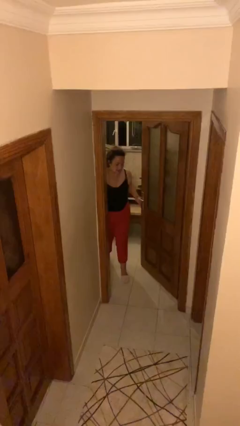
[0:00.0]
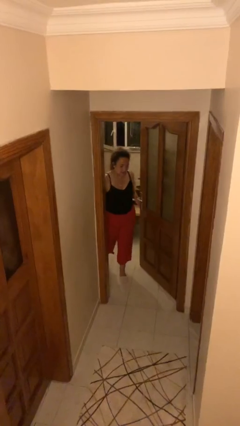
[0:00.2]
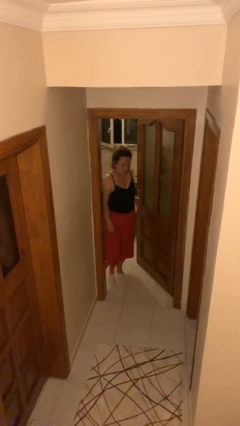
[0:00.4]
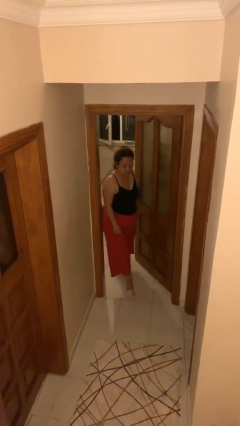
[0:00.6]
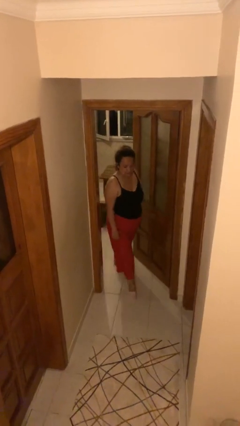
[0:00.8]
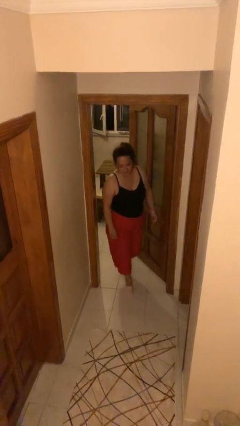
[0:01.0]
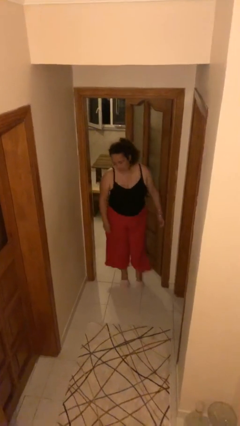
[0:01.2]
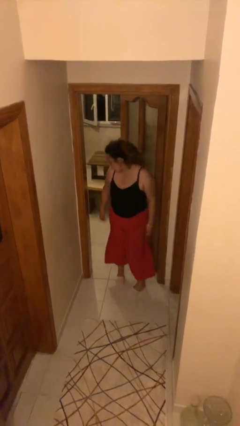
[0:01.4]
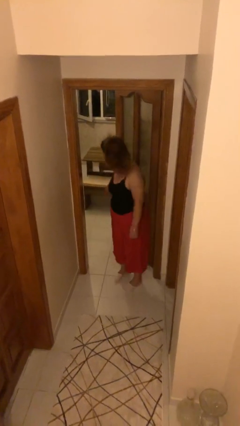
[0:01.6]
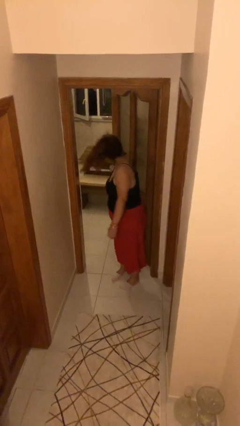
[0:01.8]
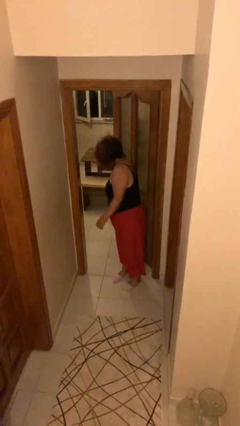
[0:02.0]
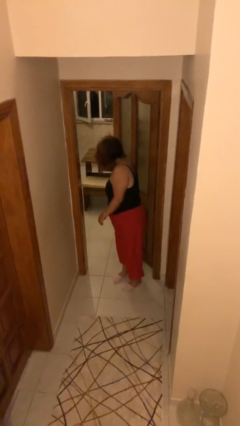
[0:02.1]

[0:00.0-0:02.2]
person enters scene through structure

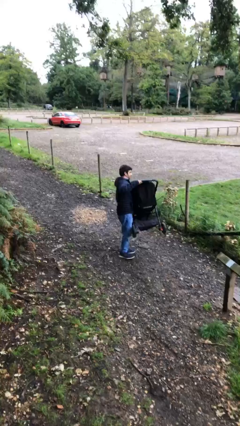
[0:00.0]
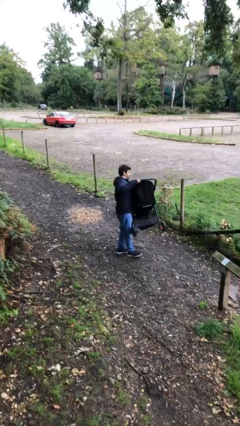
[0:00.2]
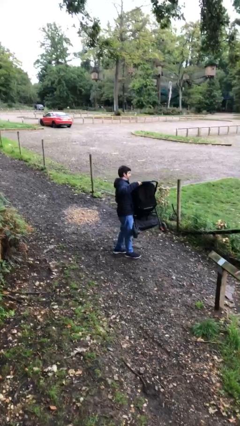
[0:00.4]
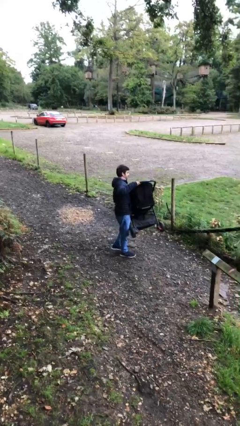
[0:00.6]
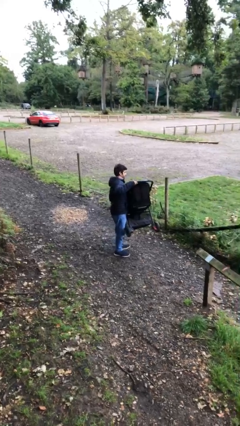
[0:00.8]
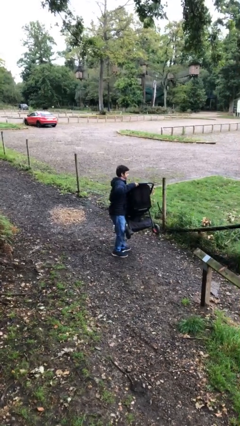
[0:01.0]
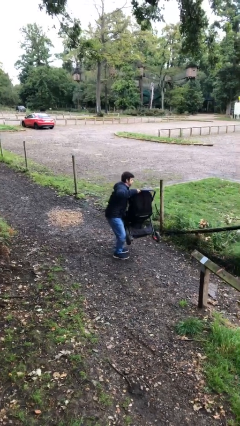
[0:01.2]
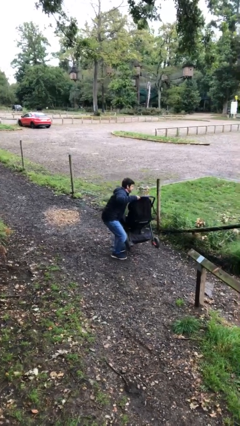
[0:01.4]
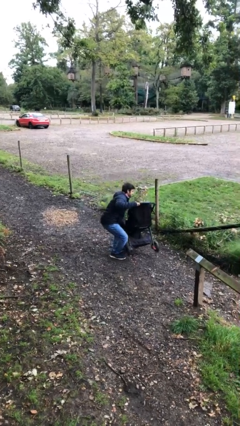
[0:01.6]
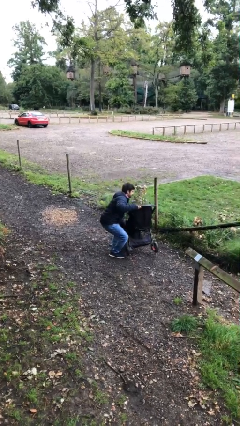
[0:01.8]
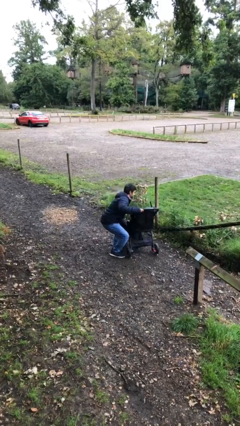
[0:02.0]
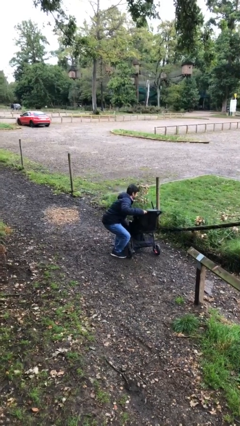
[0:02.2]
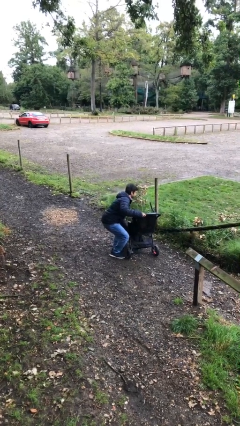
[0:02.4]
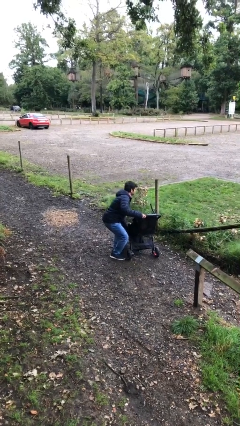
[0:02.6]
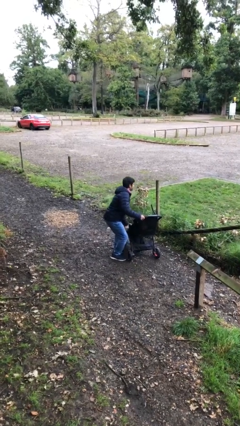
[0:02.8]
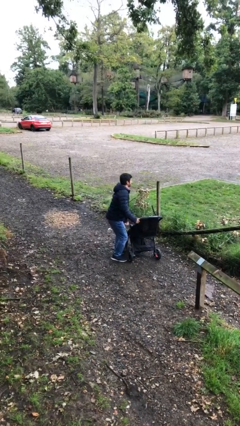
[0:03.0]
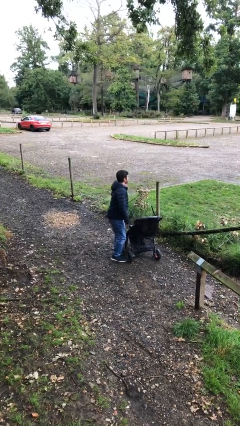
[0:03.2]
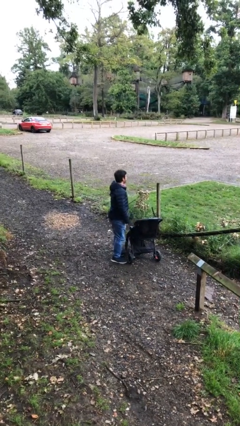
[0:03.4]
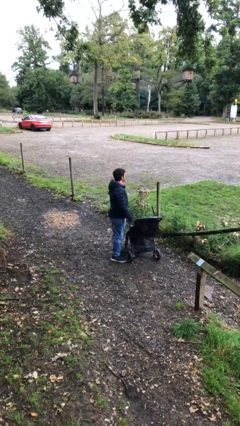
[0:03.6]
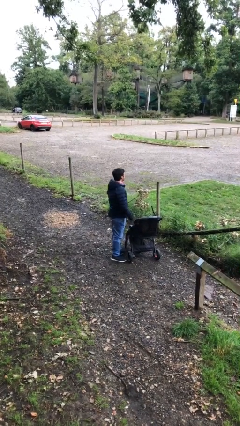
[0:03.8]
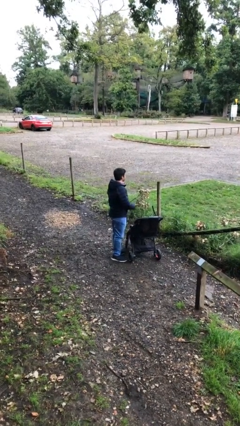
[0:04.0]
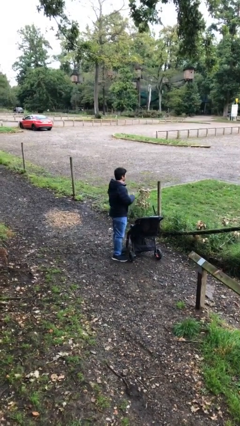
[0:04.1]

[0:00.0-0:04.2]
person puts down object on floor

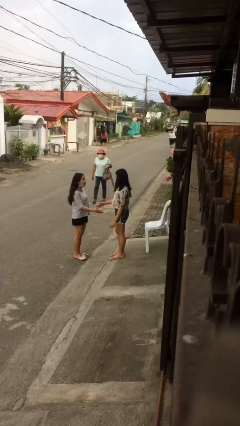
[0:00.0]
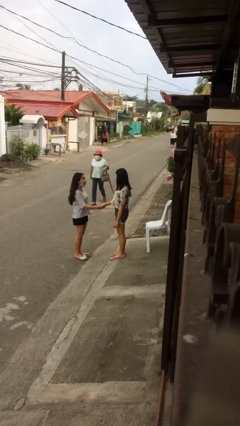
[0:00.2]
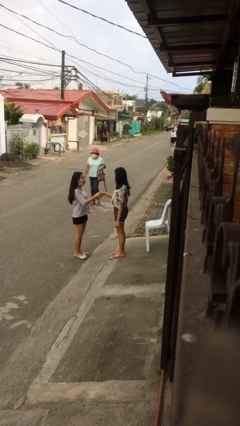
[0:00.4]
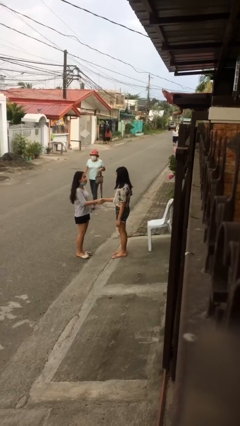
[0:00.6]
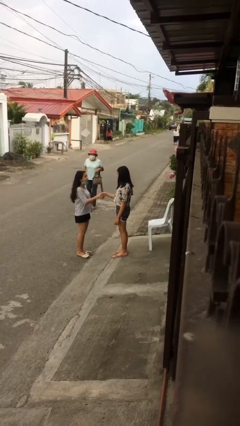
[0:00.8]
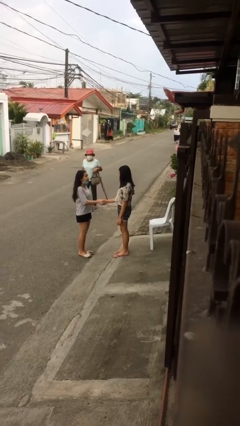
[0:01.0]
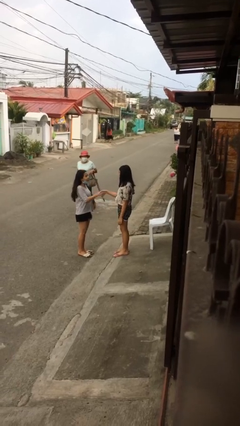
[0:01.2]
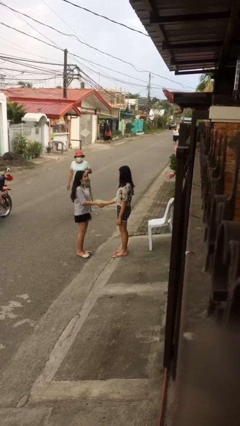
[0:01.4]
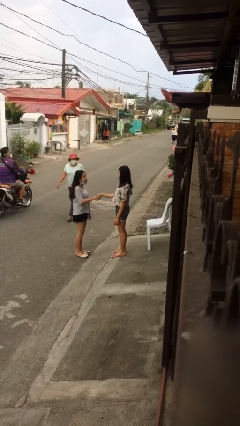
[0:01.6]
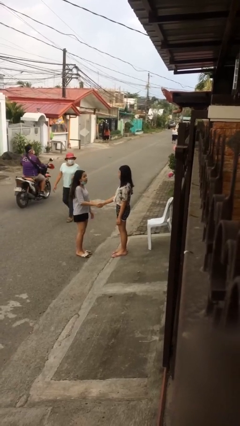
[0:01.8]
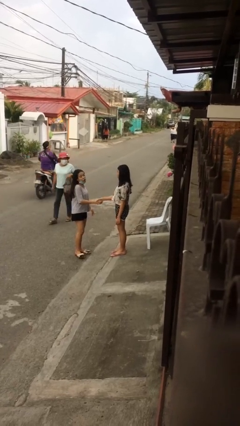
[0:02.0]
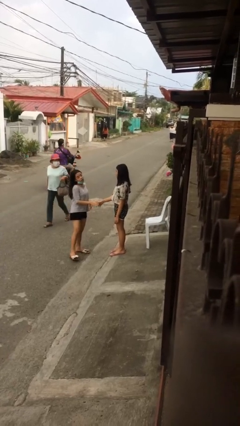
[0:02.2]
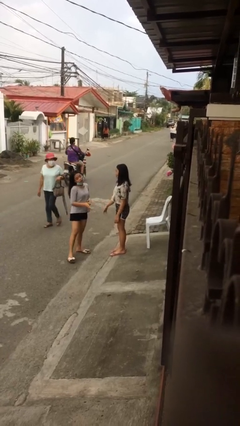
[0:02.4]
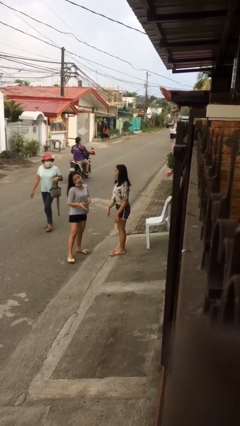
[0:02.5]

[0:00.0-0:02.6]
person shakes hand

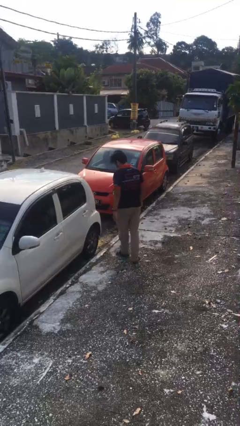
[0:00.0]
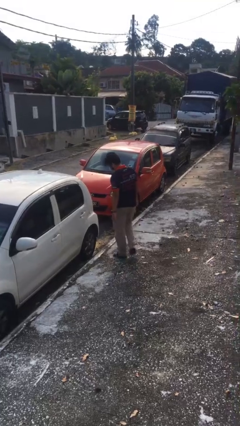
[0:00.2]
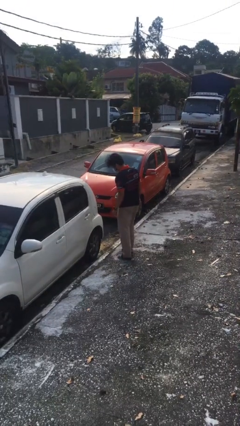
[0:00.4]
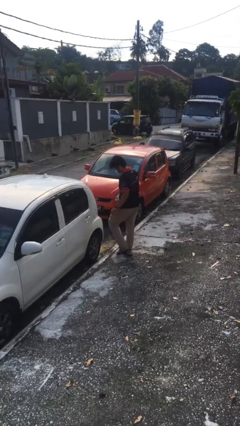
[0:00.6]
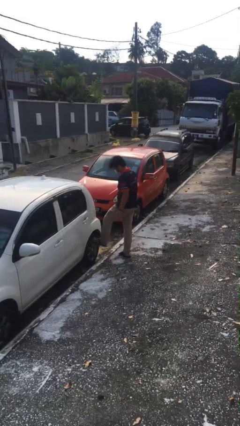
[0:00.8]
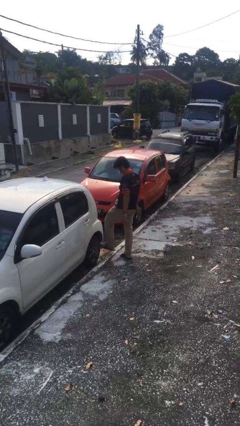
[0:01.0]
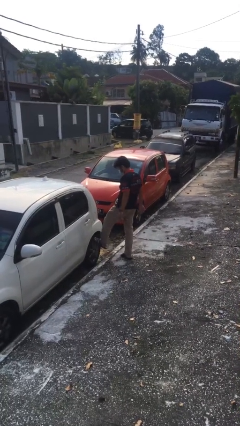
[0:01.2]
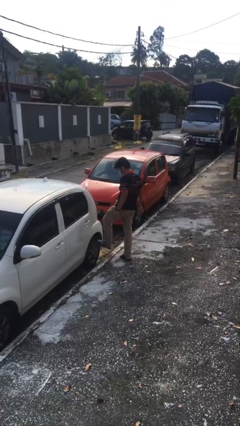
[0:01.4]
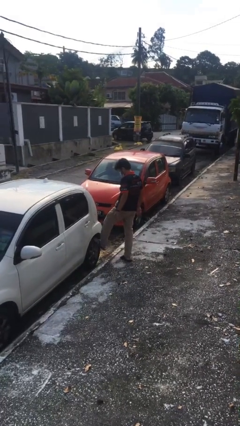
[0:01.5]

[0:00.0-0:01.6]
person kicks car tires

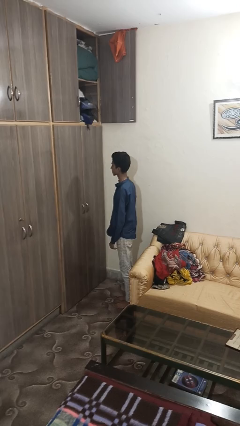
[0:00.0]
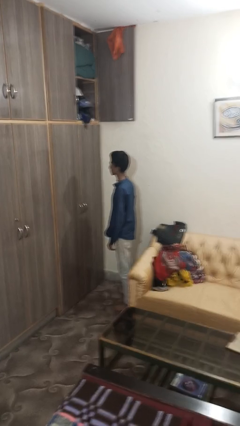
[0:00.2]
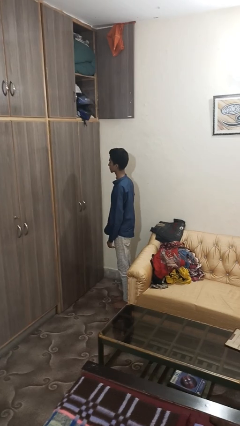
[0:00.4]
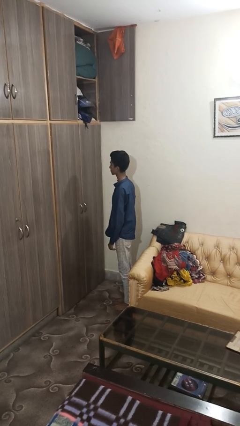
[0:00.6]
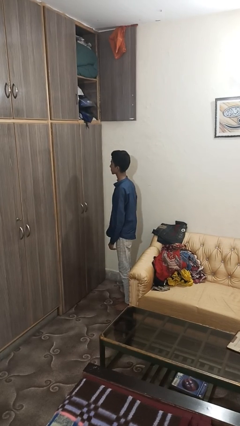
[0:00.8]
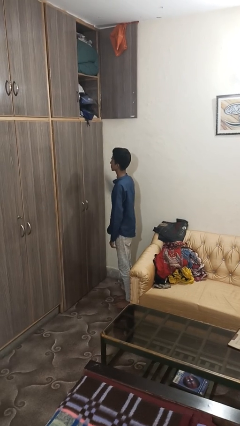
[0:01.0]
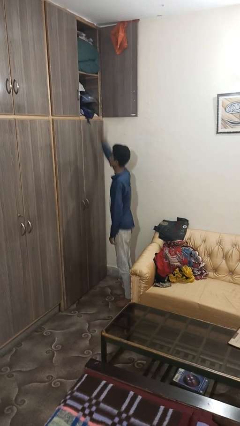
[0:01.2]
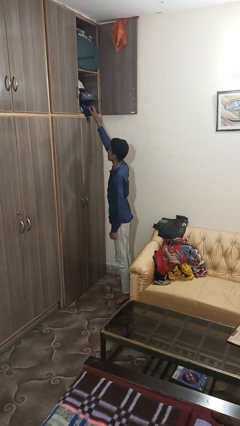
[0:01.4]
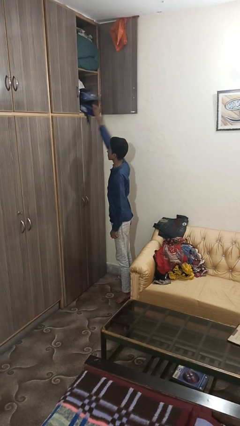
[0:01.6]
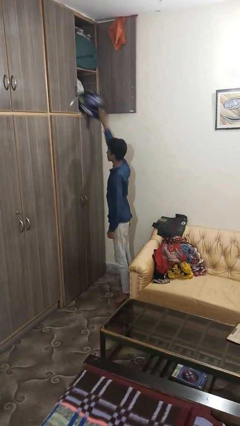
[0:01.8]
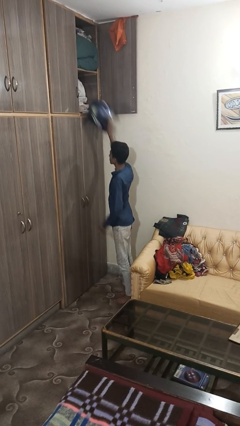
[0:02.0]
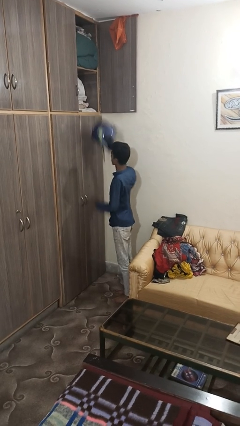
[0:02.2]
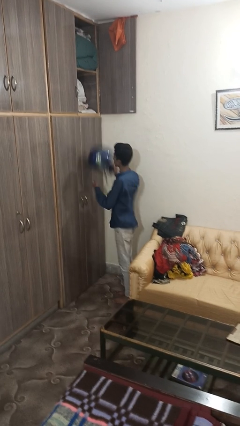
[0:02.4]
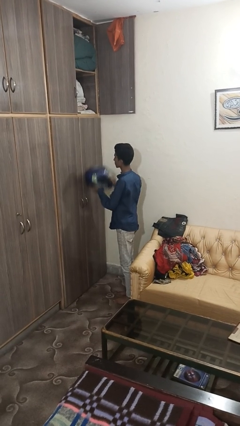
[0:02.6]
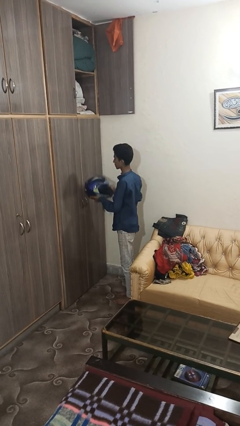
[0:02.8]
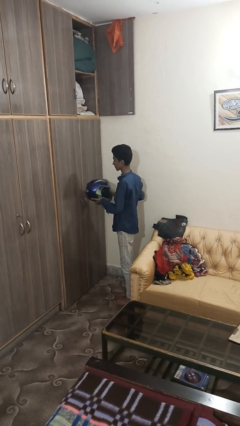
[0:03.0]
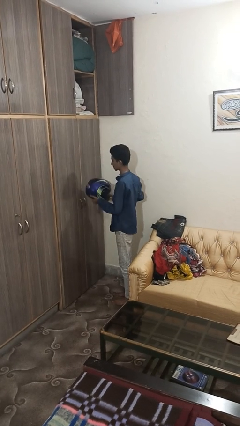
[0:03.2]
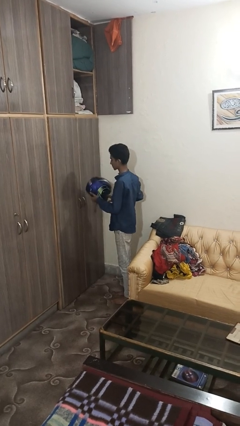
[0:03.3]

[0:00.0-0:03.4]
person picks up object from shelf

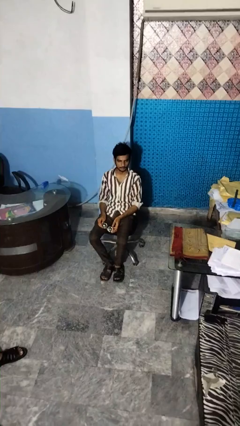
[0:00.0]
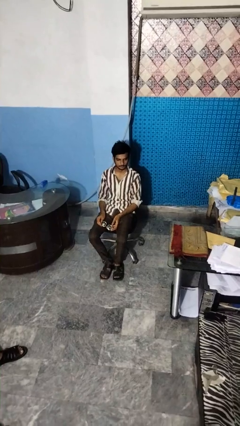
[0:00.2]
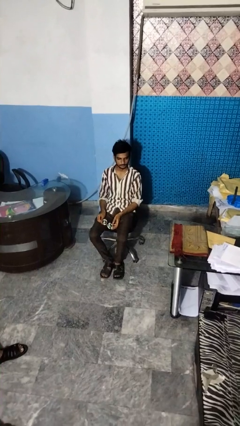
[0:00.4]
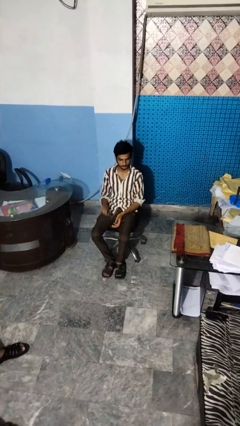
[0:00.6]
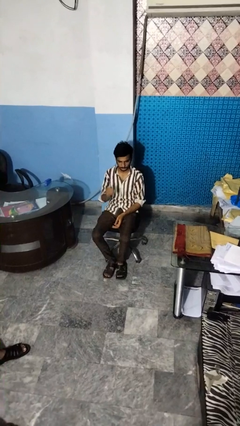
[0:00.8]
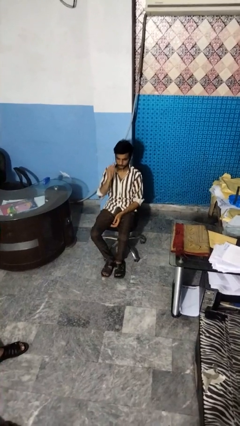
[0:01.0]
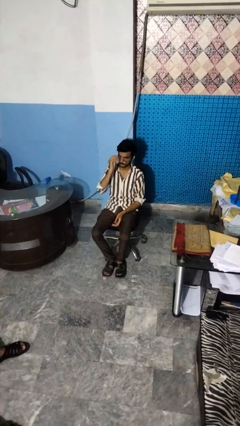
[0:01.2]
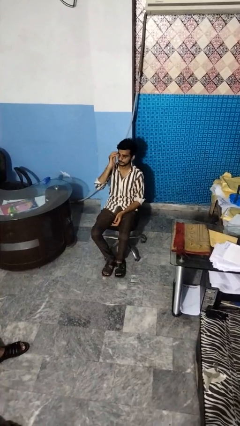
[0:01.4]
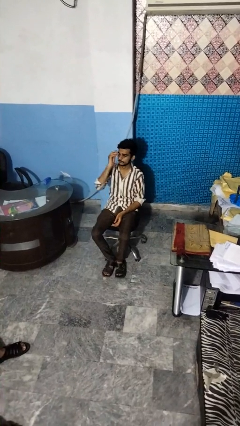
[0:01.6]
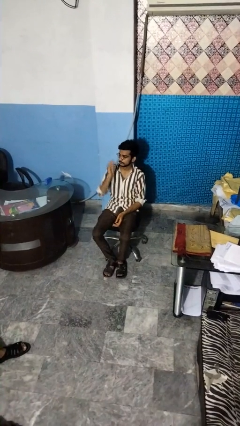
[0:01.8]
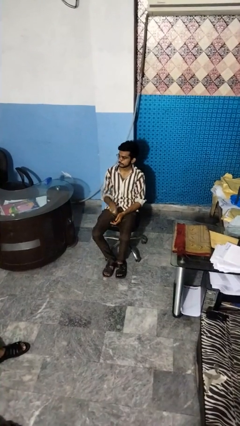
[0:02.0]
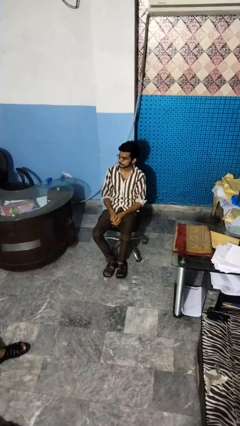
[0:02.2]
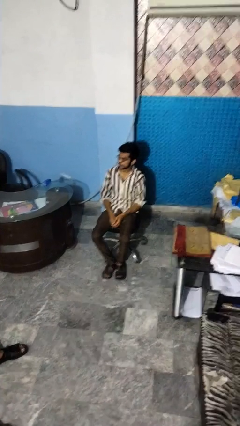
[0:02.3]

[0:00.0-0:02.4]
person puts on glasses

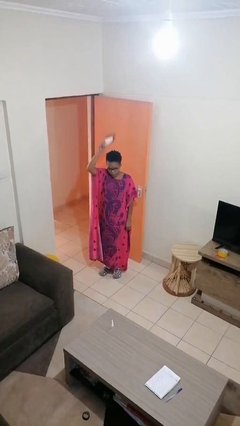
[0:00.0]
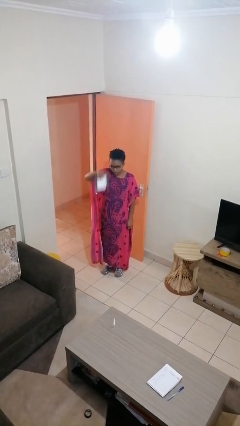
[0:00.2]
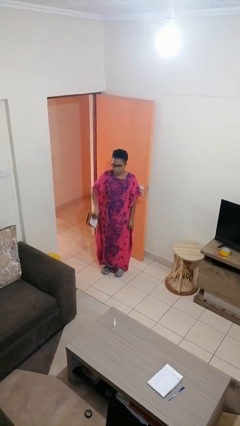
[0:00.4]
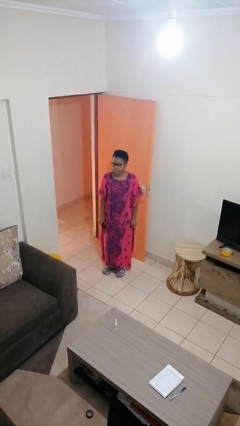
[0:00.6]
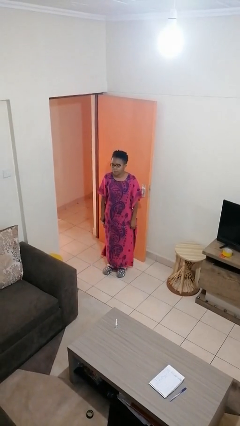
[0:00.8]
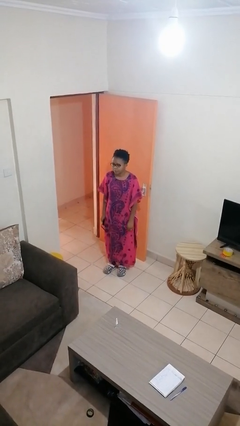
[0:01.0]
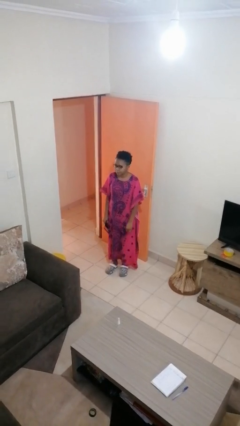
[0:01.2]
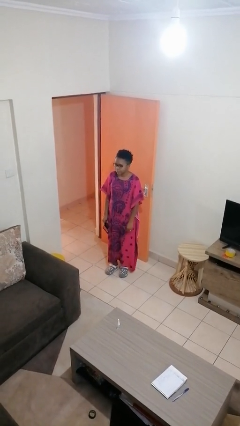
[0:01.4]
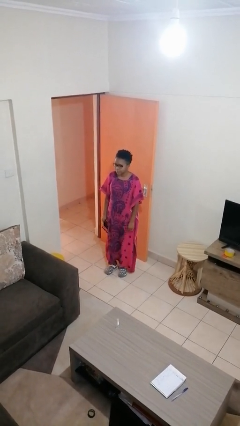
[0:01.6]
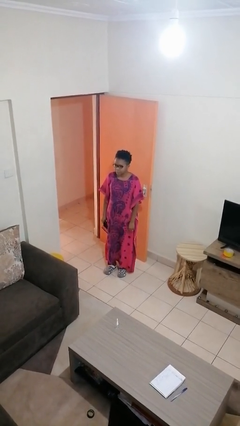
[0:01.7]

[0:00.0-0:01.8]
person holds object above head
